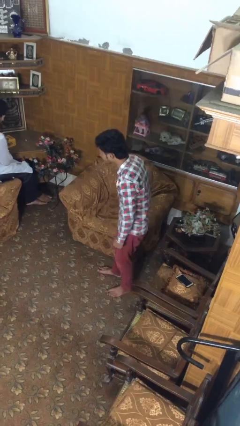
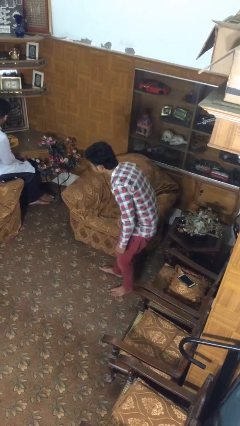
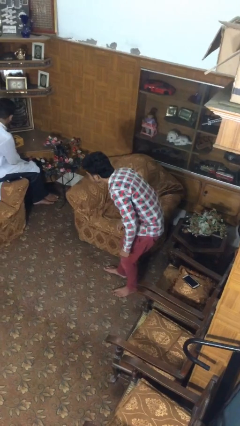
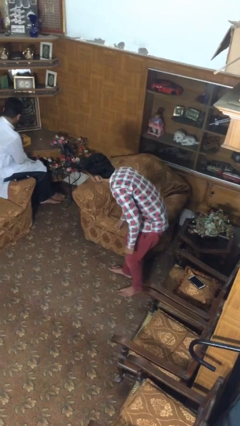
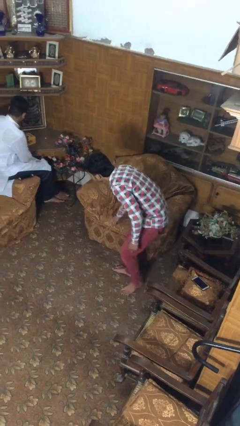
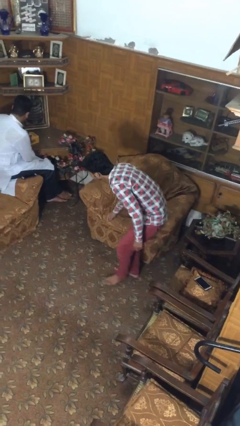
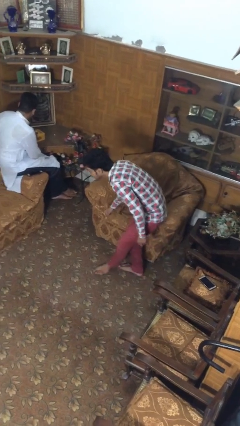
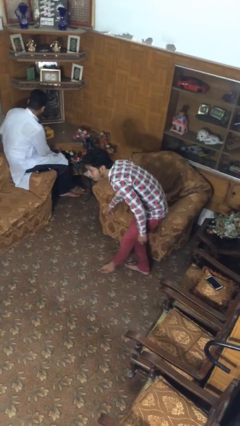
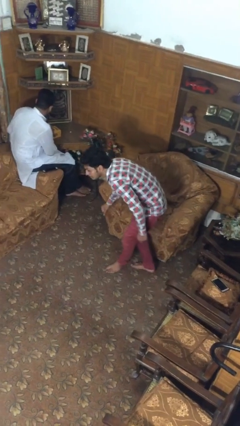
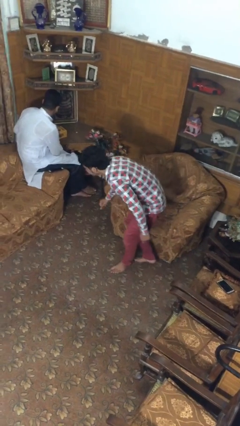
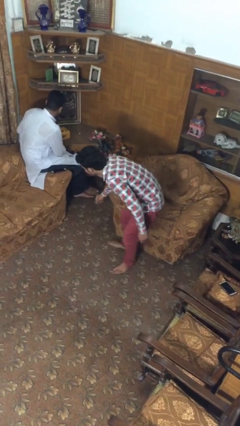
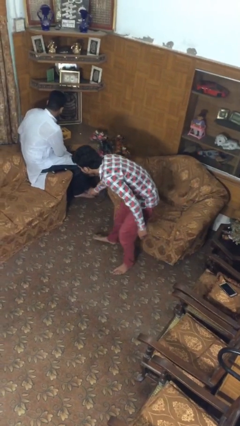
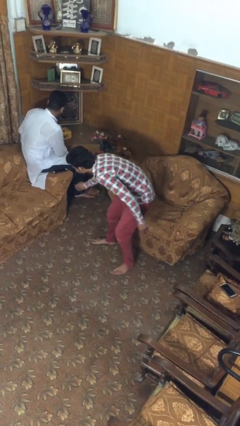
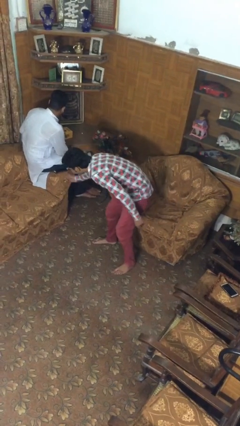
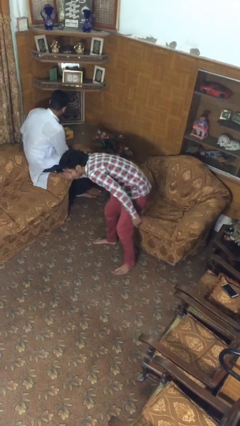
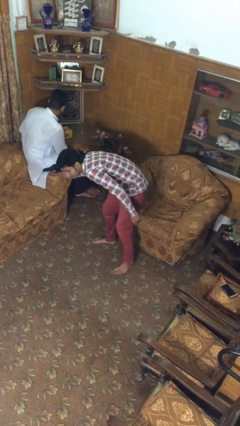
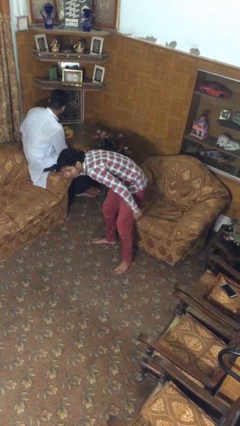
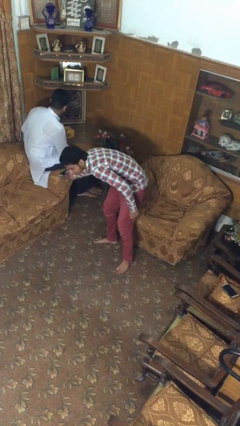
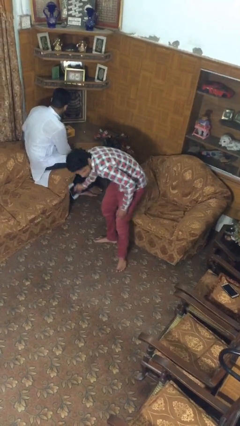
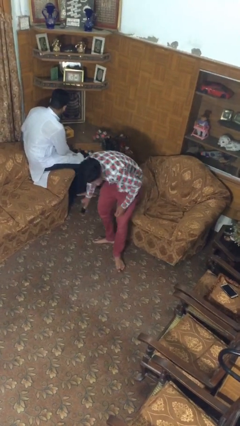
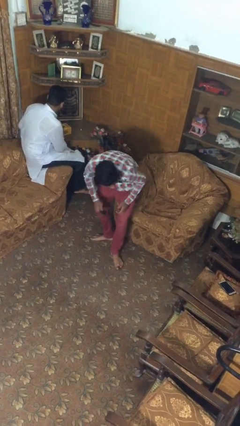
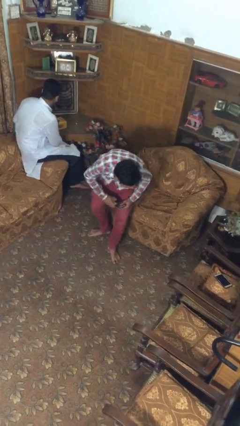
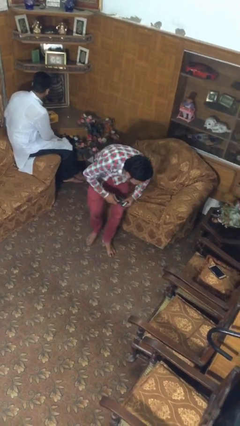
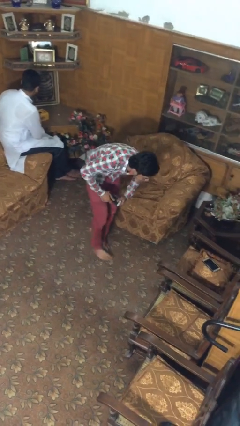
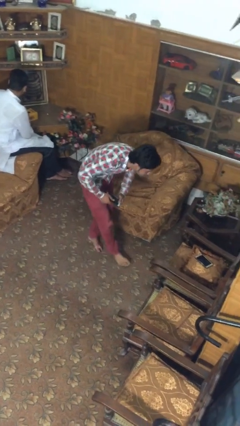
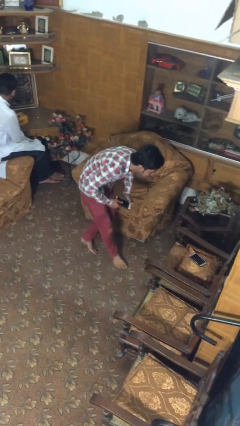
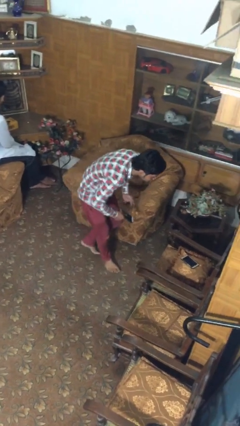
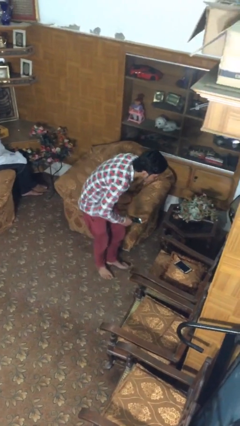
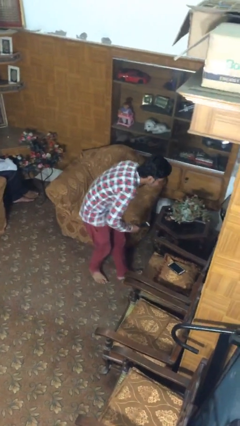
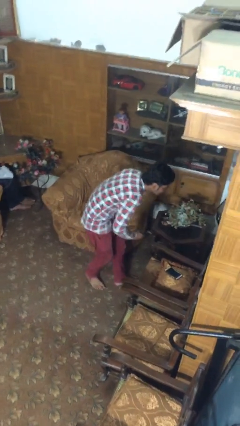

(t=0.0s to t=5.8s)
person steals object from person

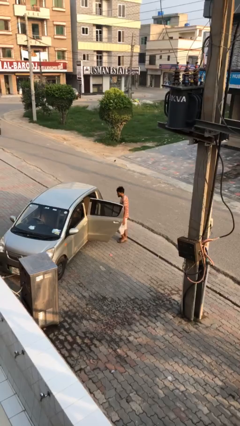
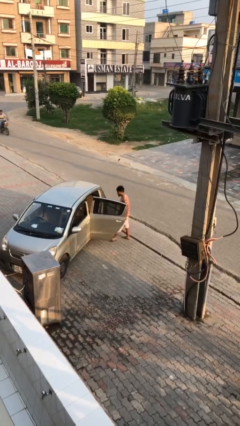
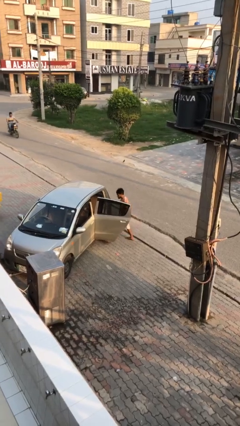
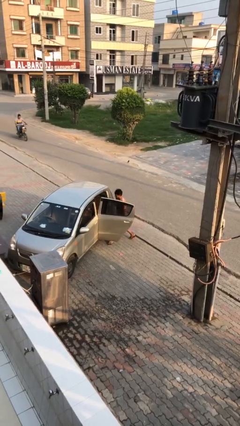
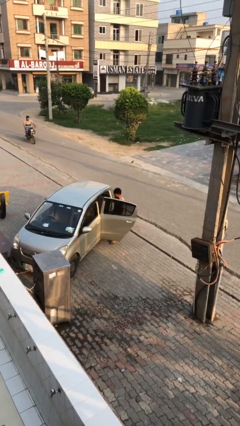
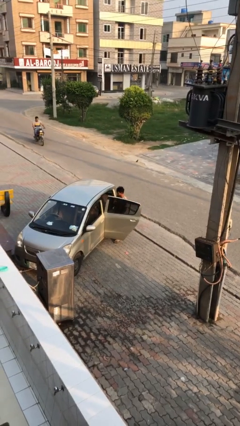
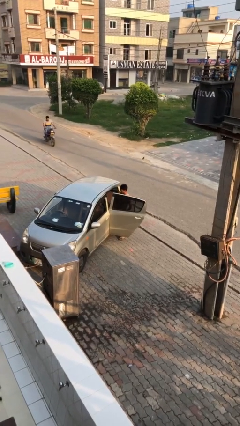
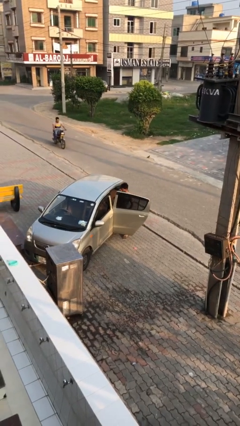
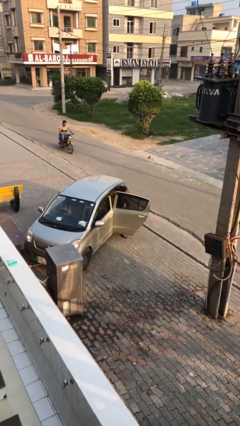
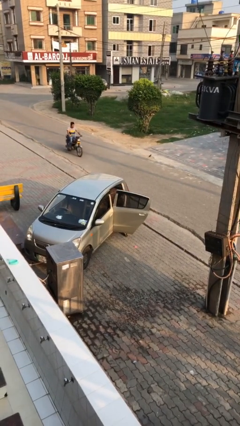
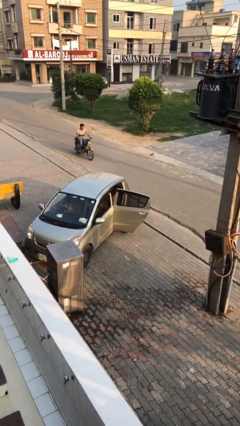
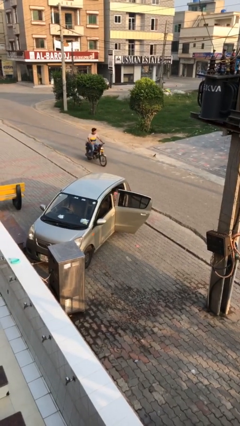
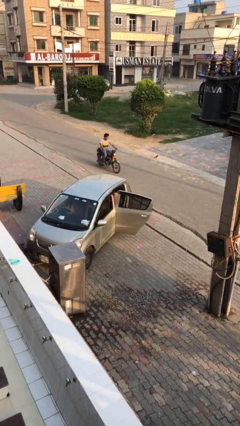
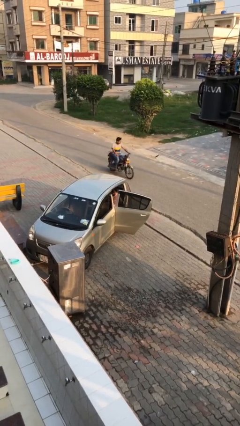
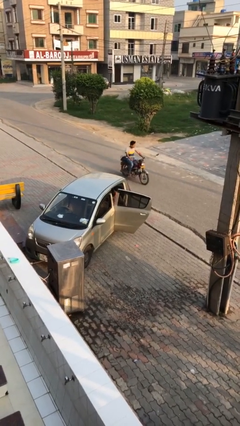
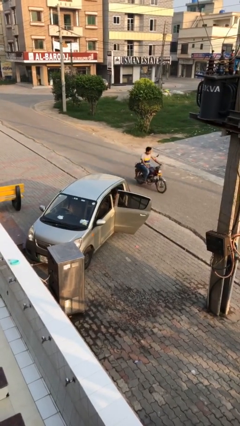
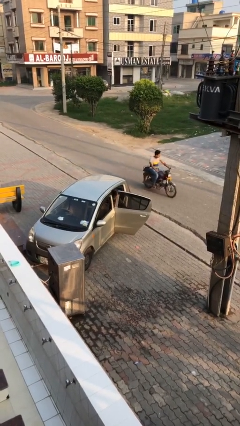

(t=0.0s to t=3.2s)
person enters car

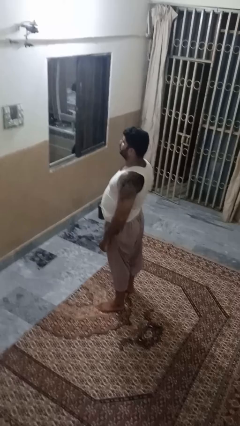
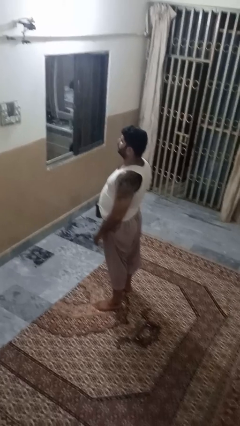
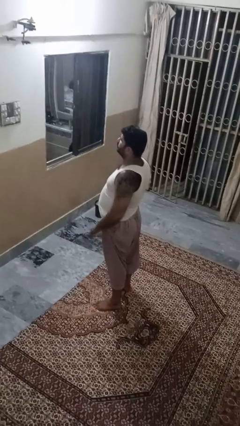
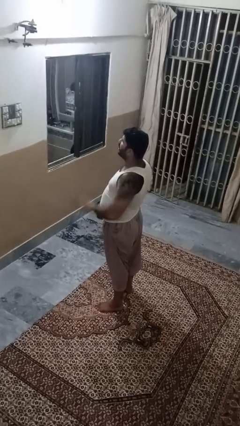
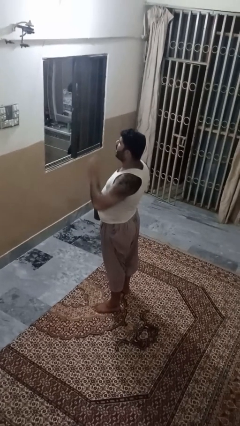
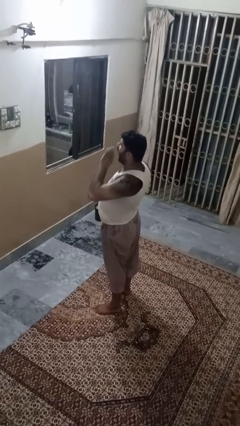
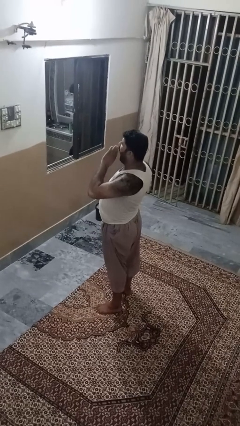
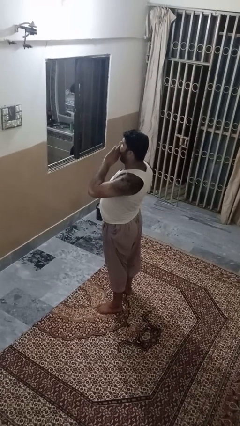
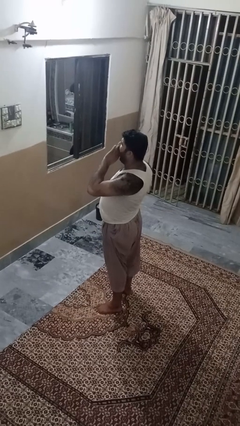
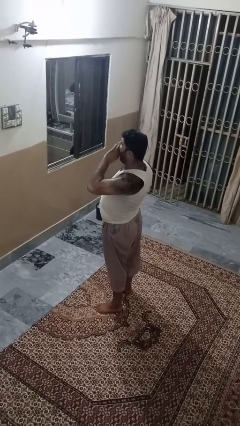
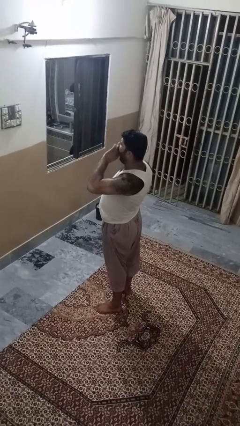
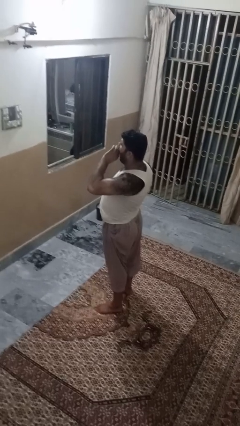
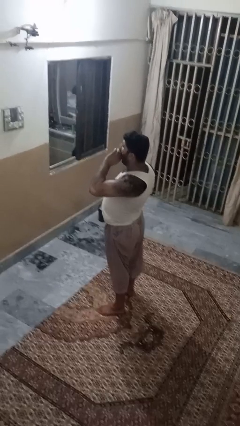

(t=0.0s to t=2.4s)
person yawns

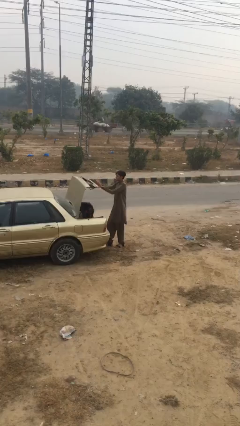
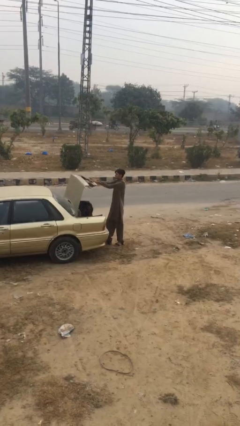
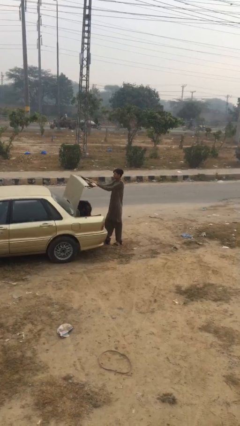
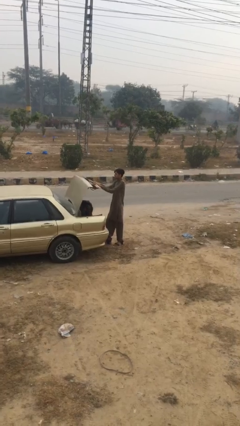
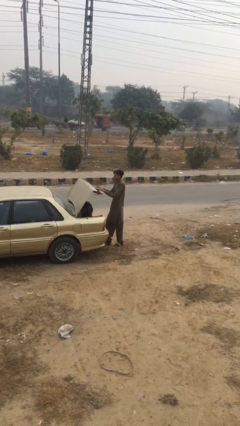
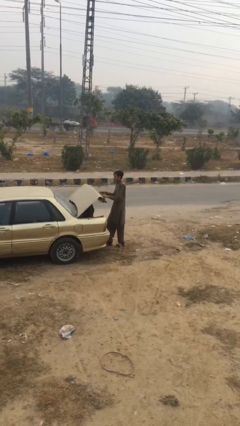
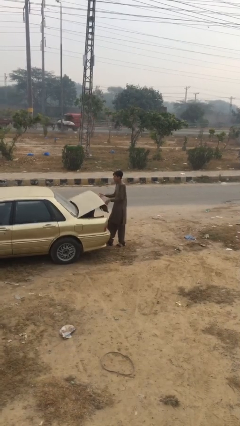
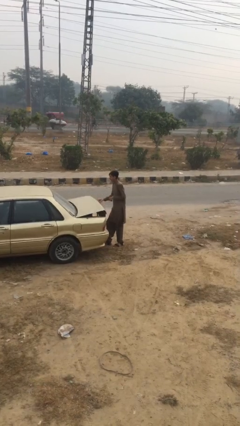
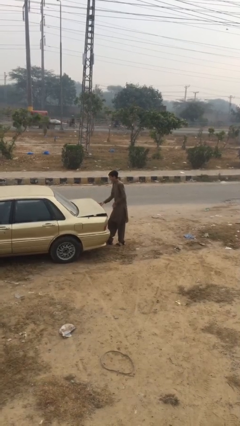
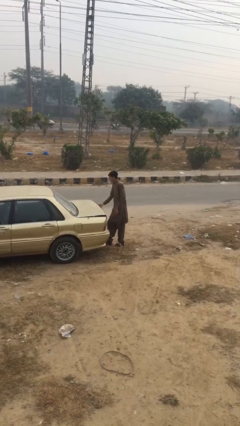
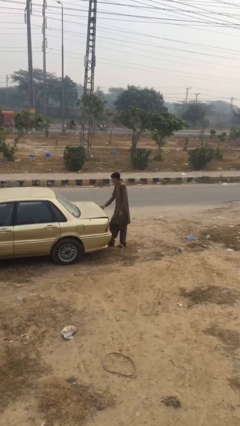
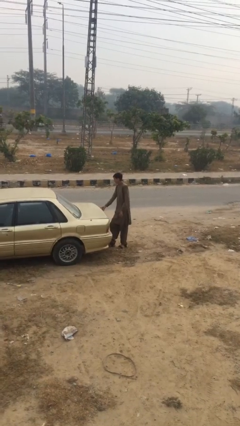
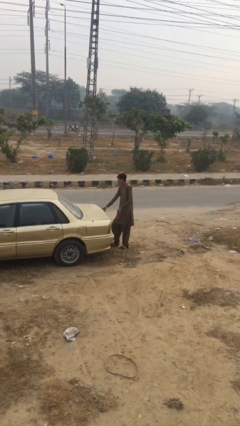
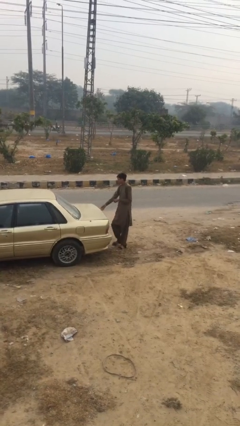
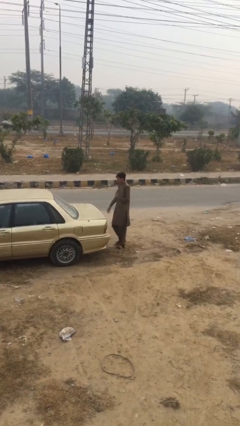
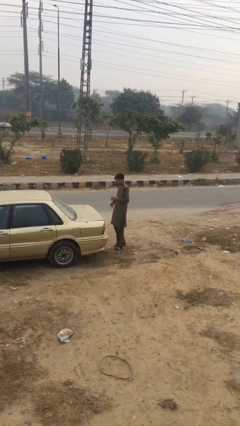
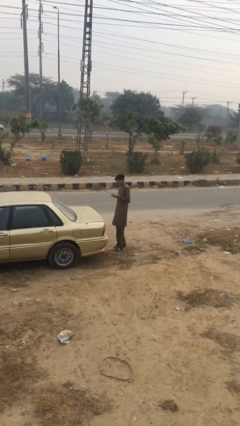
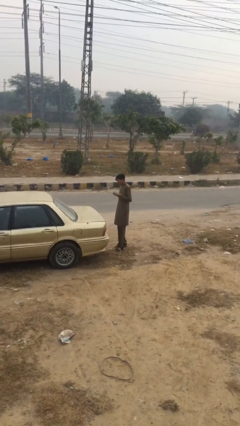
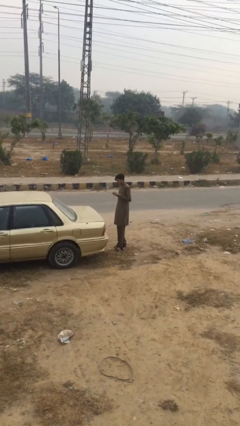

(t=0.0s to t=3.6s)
person closes car trunk

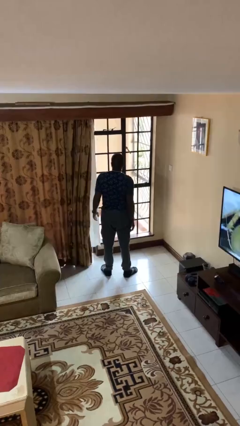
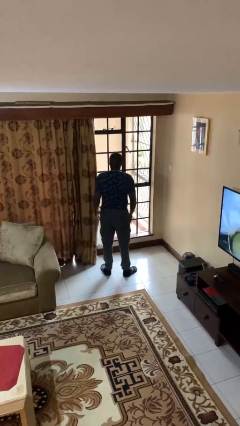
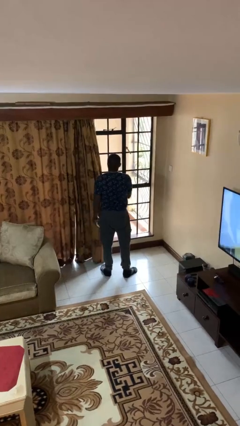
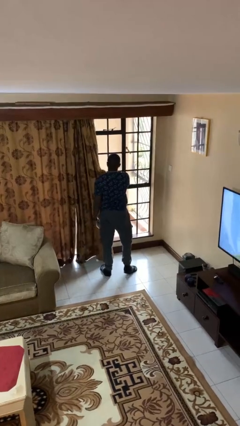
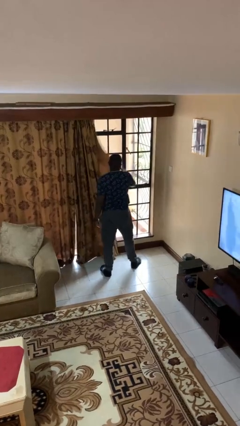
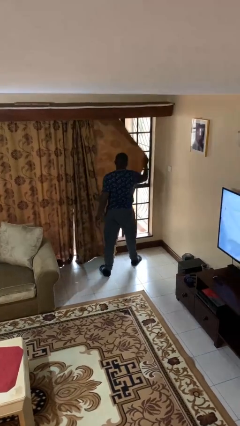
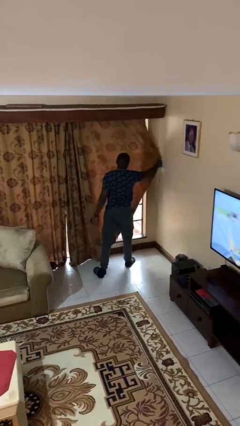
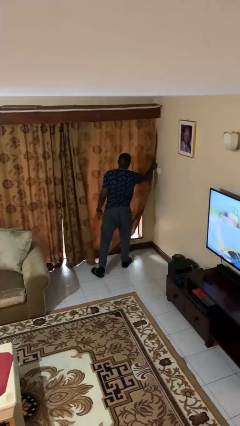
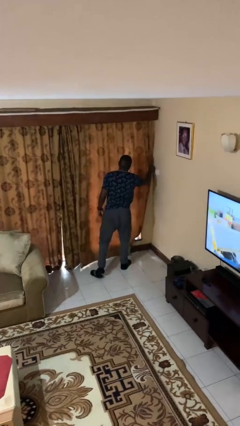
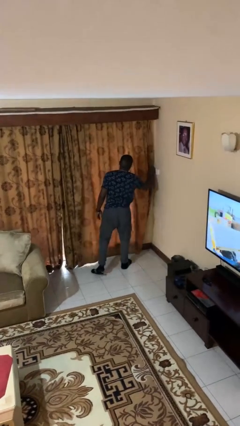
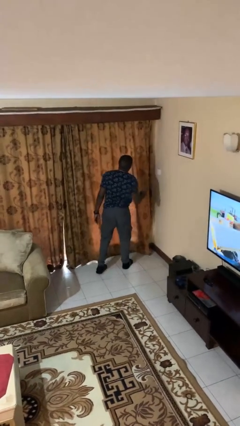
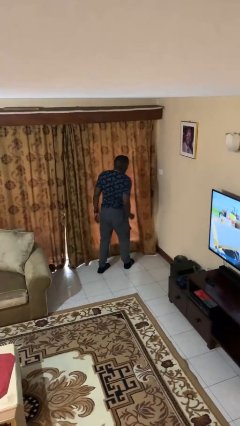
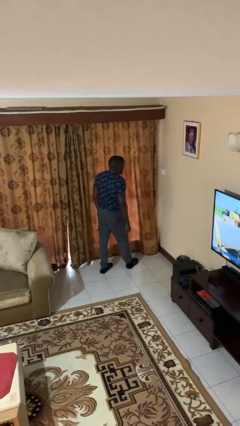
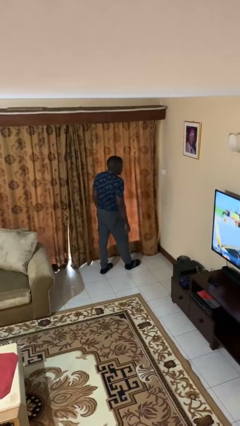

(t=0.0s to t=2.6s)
person closes curtains

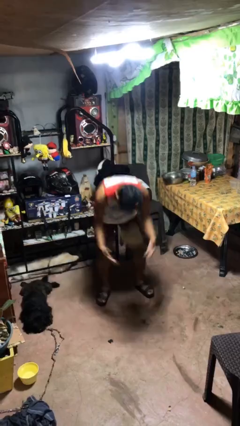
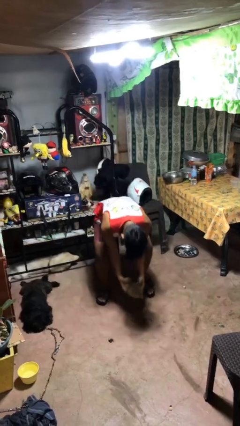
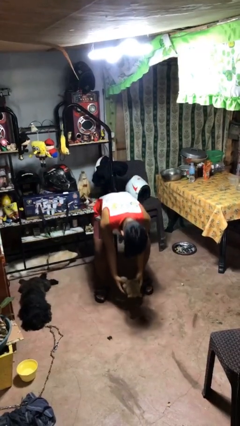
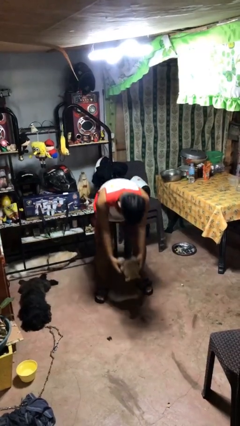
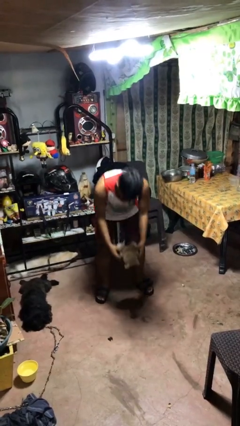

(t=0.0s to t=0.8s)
person catches dropped object
